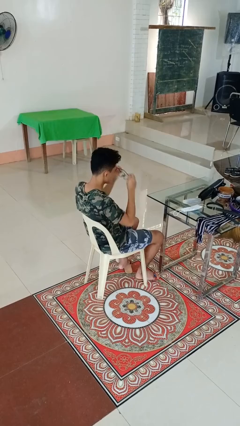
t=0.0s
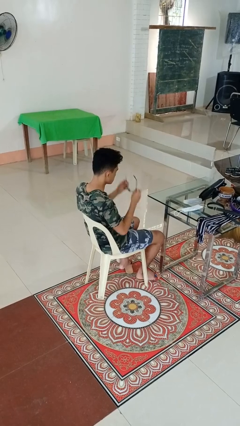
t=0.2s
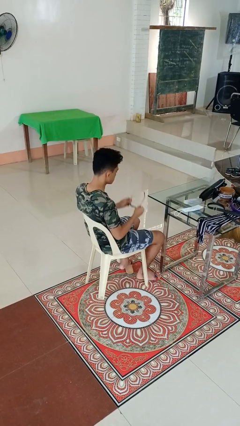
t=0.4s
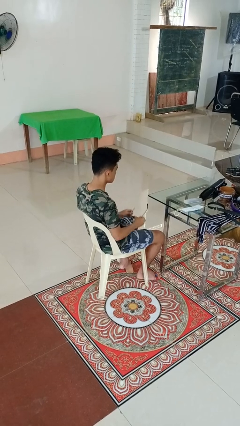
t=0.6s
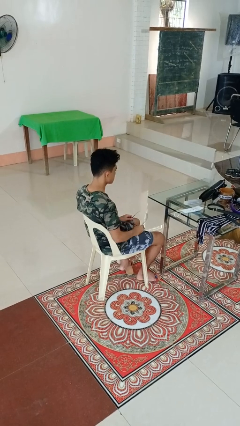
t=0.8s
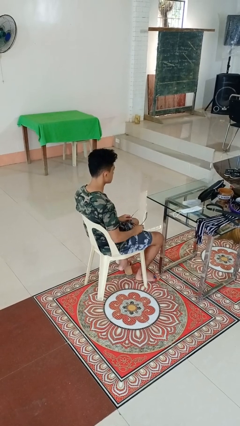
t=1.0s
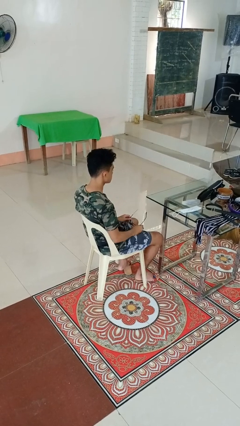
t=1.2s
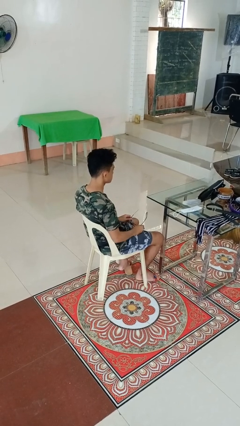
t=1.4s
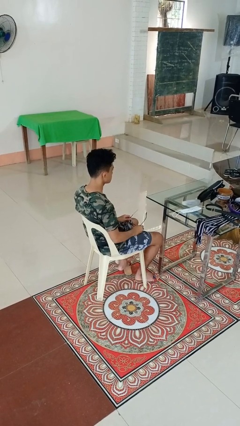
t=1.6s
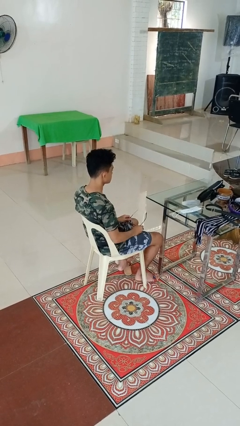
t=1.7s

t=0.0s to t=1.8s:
person takes off glasses

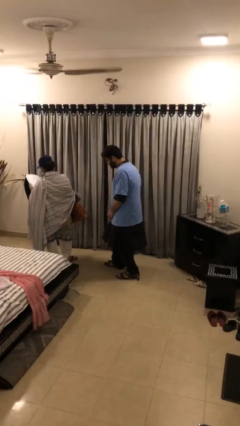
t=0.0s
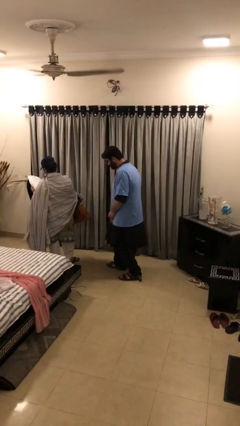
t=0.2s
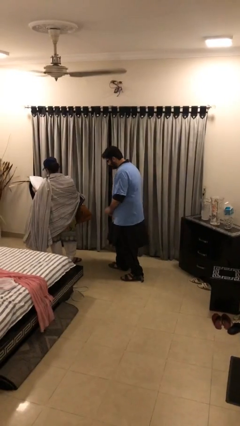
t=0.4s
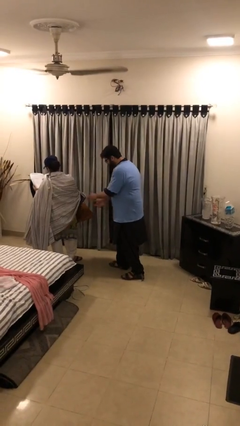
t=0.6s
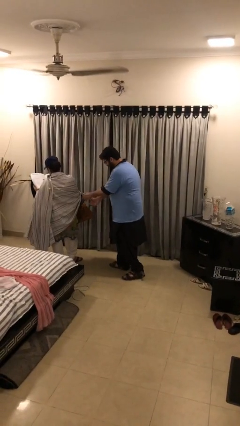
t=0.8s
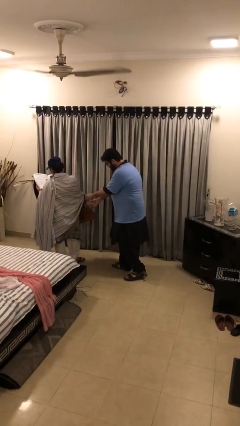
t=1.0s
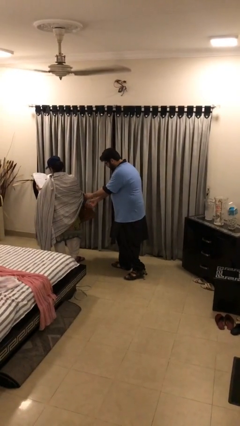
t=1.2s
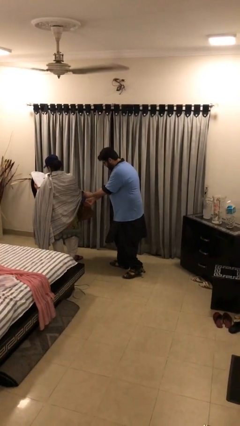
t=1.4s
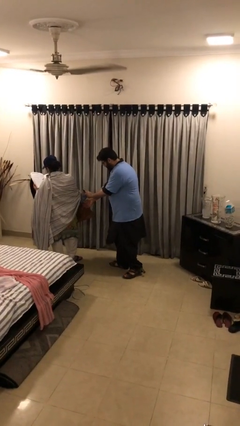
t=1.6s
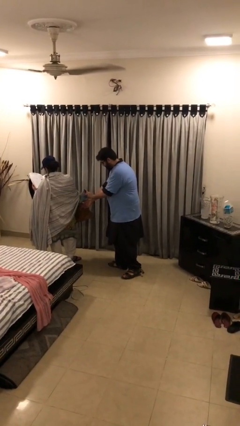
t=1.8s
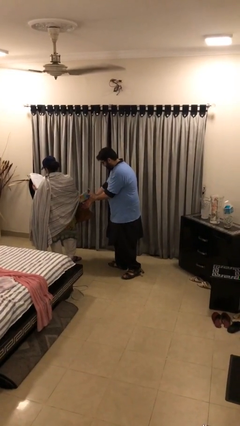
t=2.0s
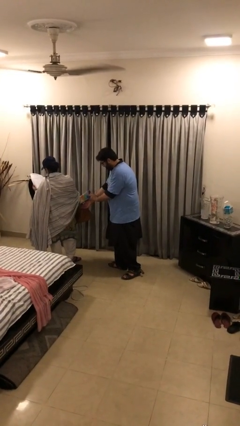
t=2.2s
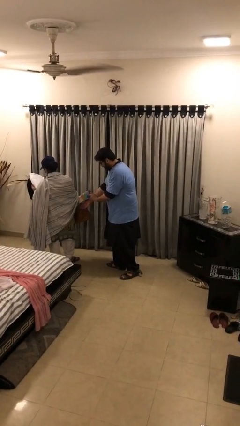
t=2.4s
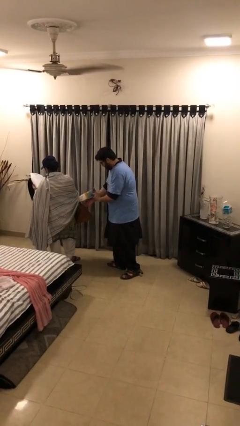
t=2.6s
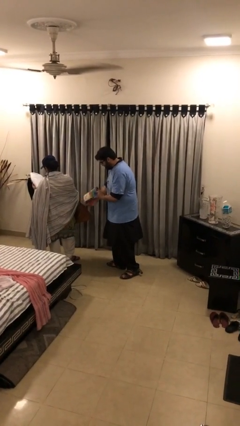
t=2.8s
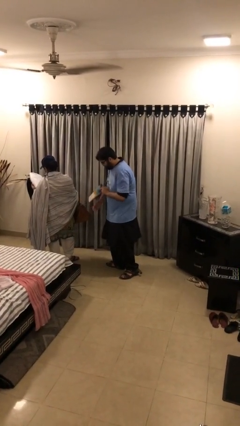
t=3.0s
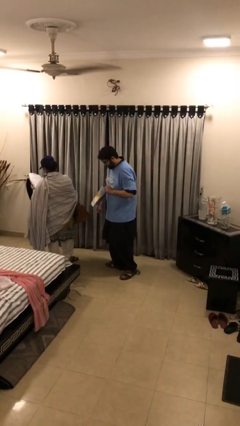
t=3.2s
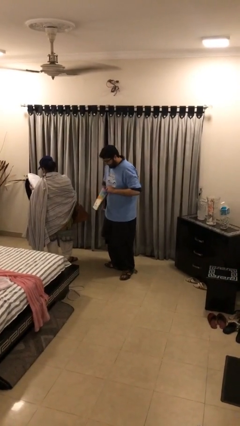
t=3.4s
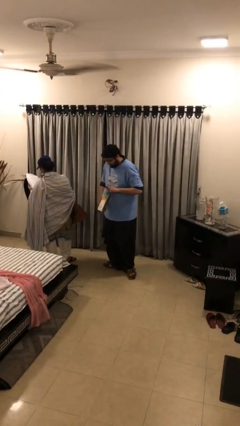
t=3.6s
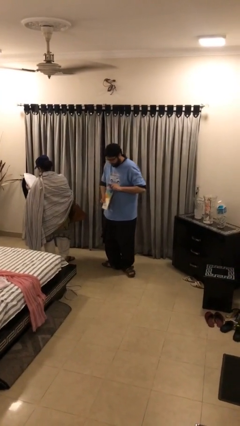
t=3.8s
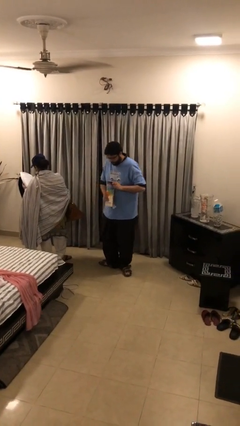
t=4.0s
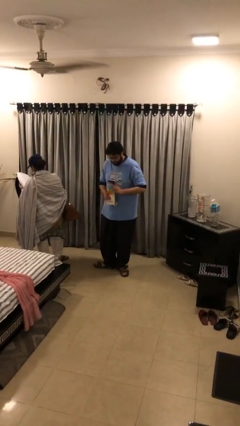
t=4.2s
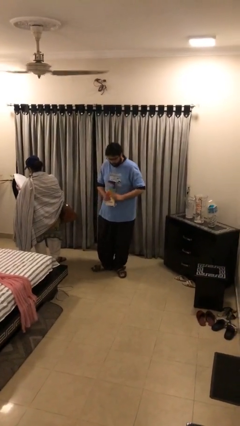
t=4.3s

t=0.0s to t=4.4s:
person steals object from person

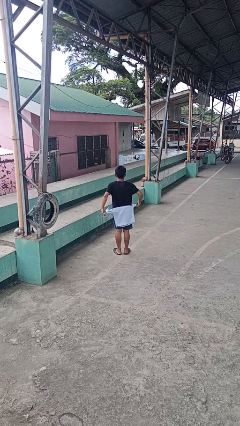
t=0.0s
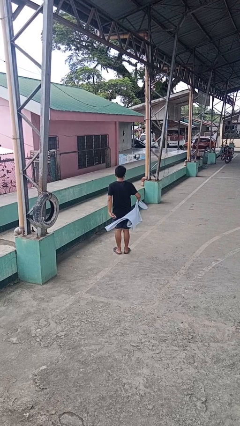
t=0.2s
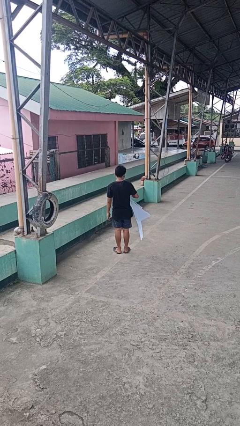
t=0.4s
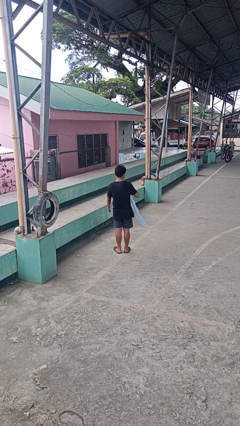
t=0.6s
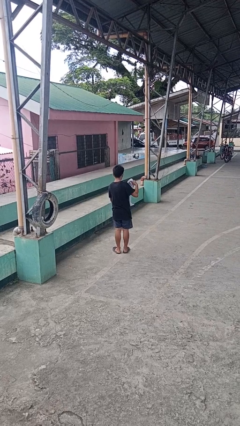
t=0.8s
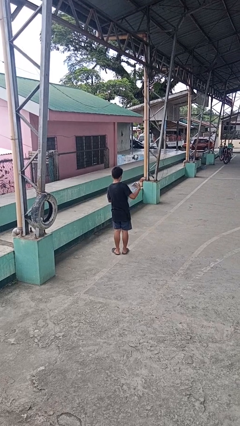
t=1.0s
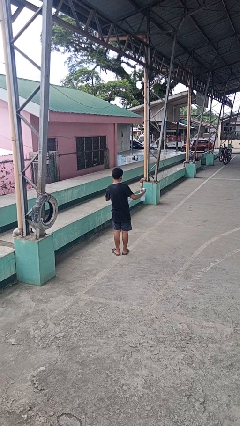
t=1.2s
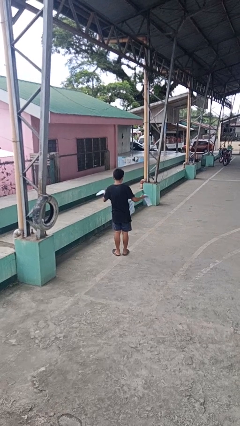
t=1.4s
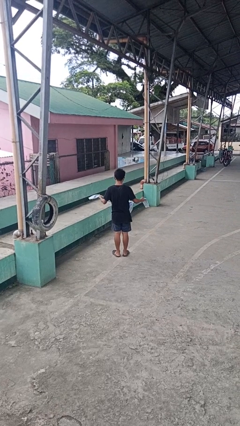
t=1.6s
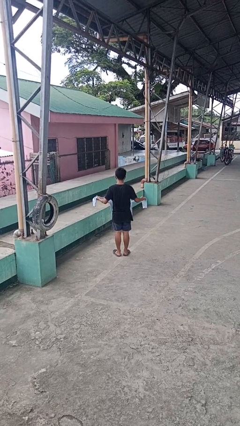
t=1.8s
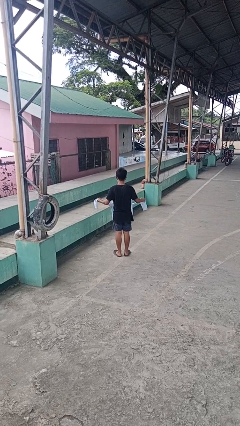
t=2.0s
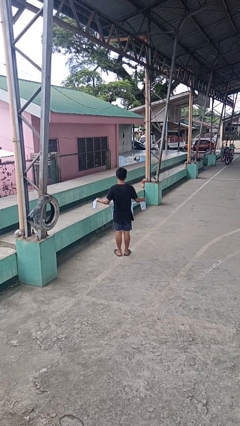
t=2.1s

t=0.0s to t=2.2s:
person unties jacket around waist

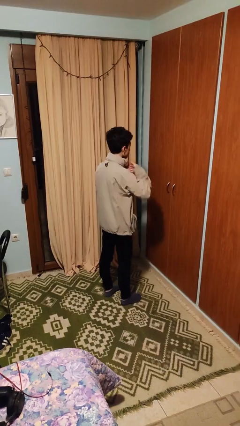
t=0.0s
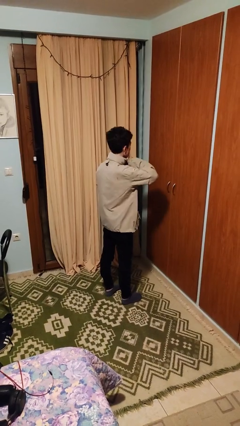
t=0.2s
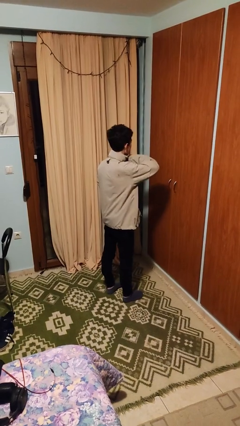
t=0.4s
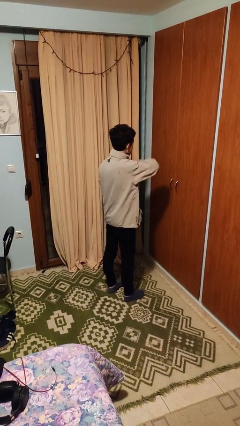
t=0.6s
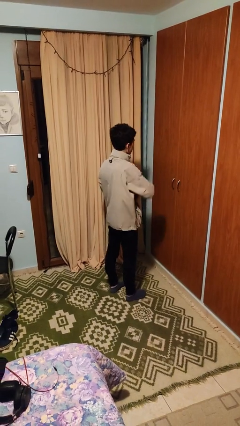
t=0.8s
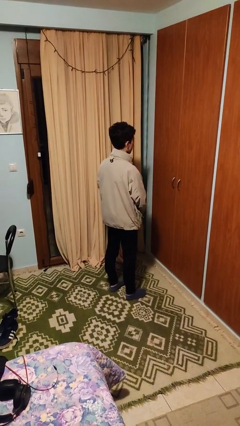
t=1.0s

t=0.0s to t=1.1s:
person unzips jacket

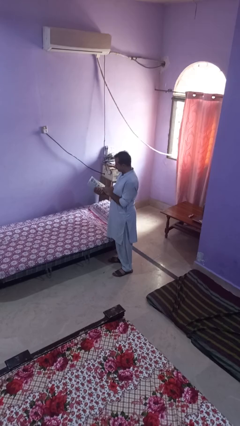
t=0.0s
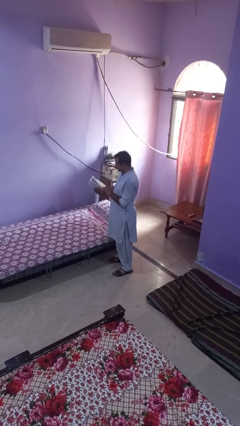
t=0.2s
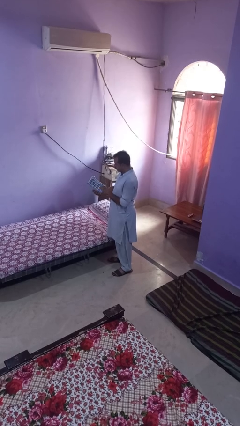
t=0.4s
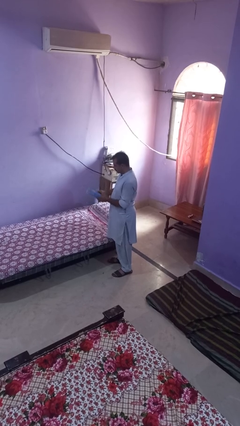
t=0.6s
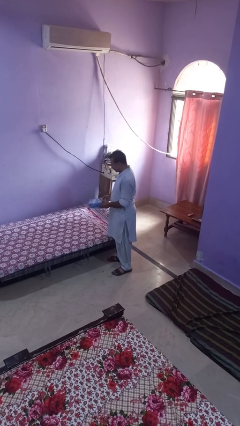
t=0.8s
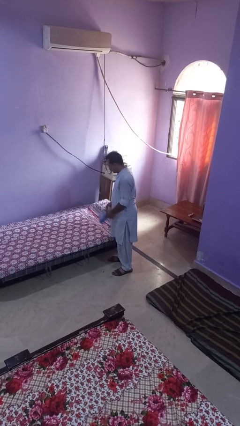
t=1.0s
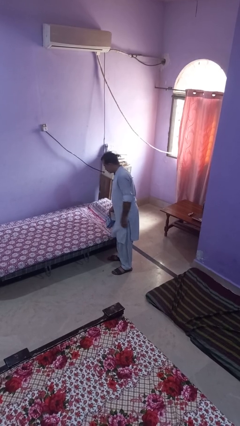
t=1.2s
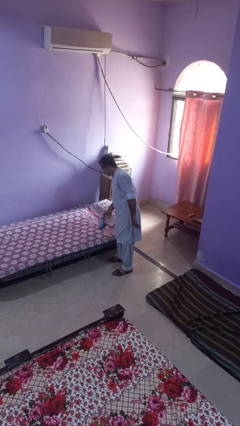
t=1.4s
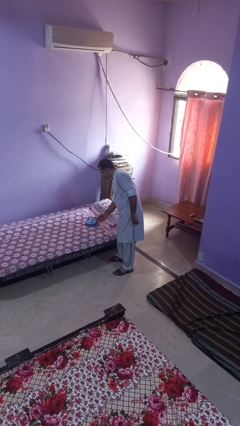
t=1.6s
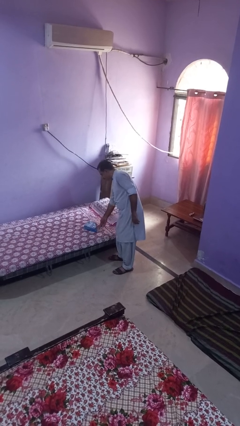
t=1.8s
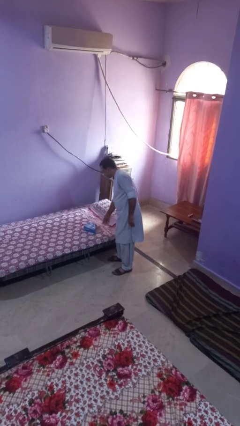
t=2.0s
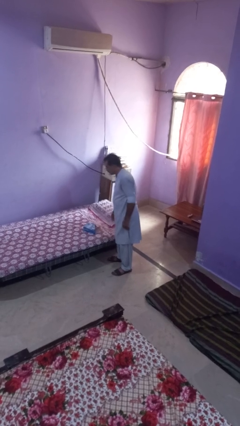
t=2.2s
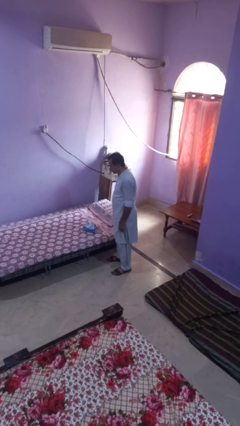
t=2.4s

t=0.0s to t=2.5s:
person puts down object on bed

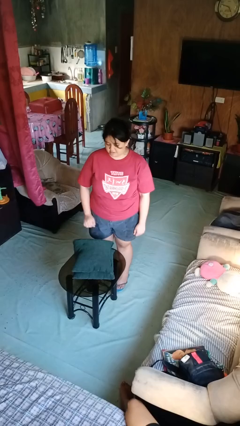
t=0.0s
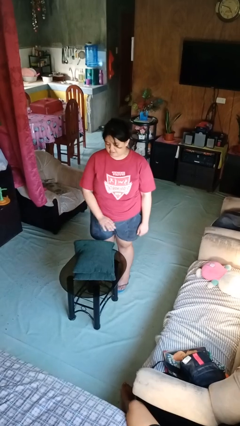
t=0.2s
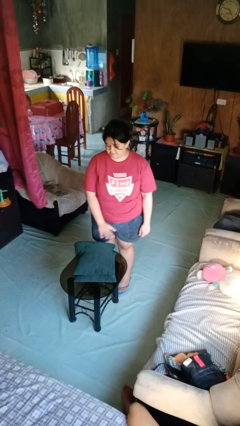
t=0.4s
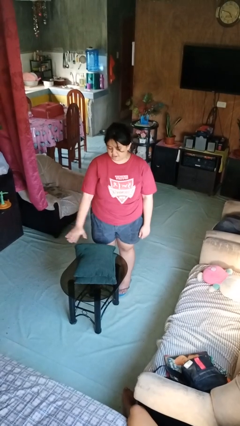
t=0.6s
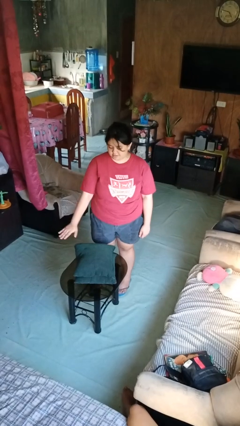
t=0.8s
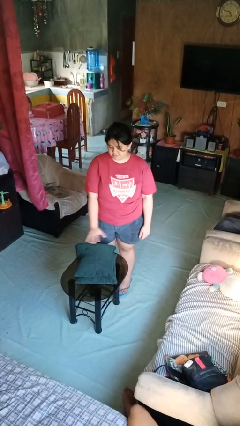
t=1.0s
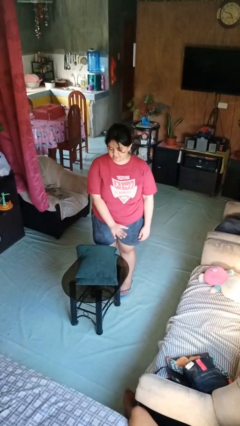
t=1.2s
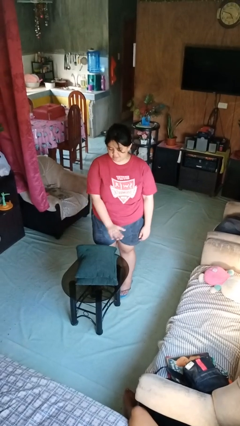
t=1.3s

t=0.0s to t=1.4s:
person waves hand over object

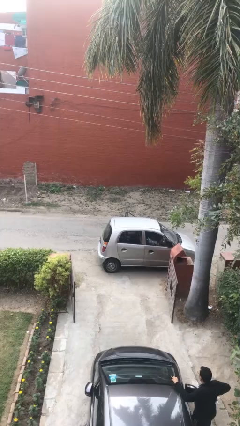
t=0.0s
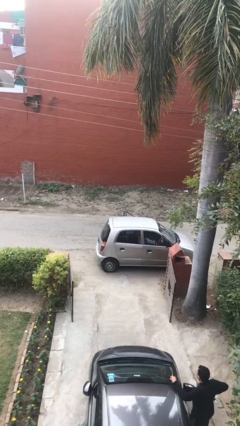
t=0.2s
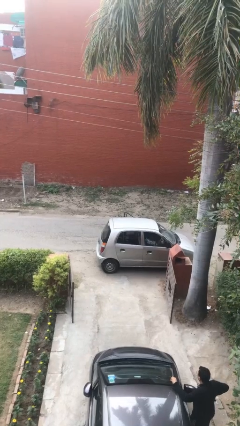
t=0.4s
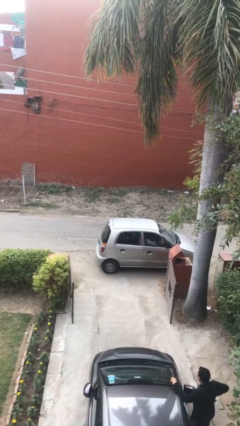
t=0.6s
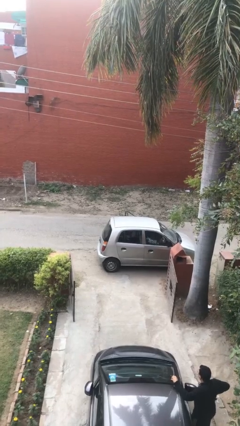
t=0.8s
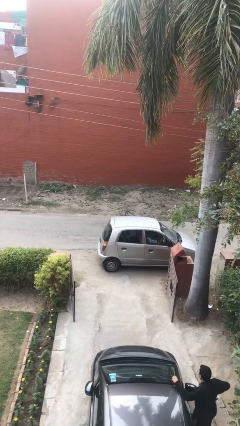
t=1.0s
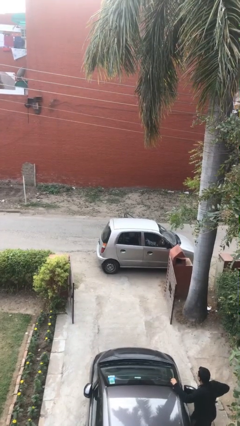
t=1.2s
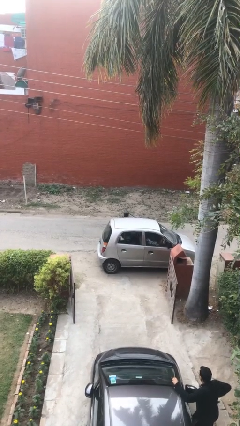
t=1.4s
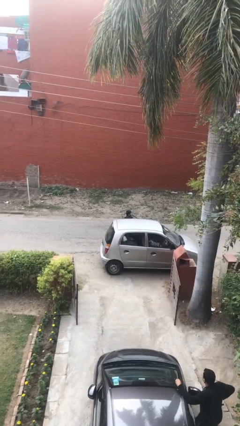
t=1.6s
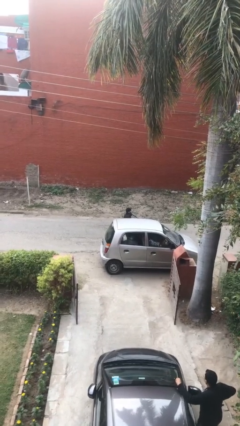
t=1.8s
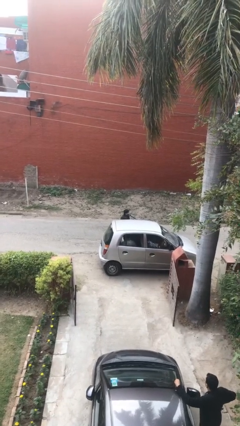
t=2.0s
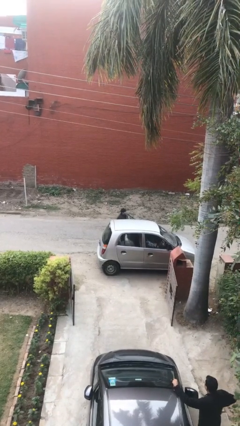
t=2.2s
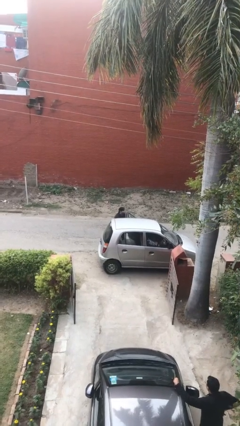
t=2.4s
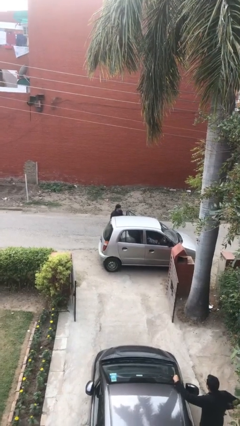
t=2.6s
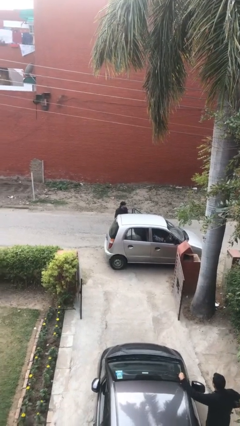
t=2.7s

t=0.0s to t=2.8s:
person exits car

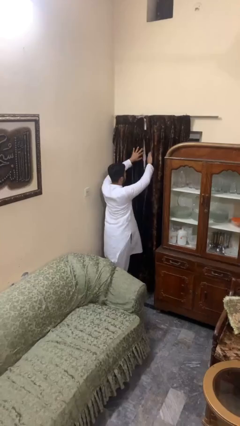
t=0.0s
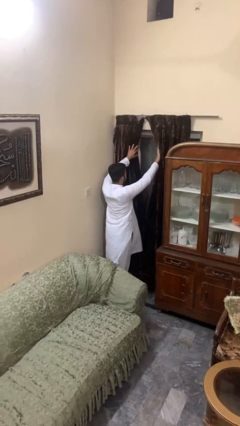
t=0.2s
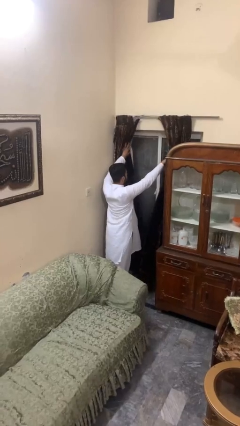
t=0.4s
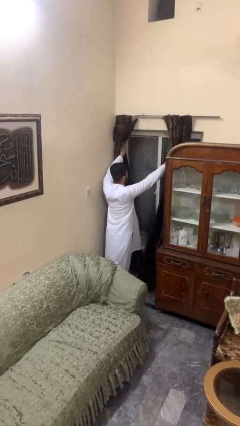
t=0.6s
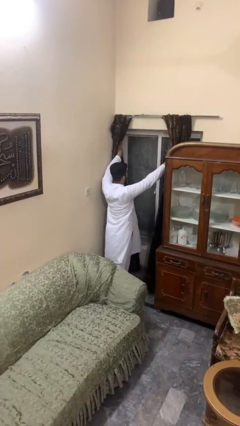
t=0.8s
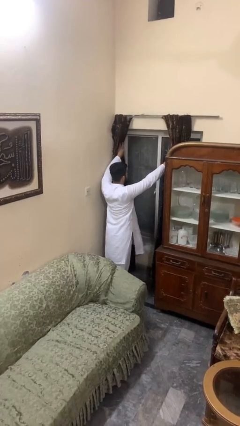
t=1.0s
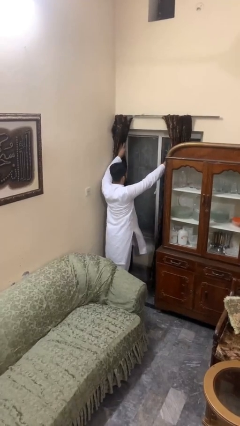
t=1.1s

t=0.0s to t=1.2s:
person opens curtains
